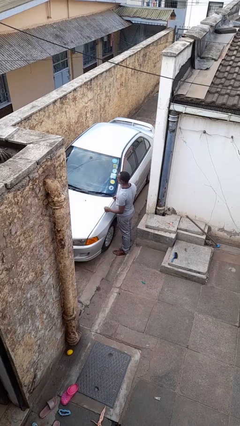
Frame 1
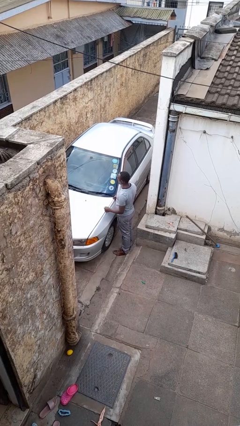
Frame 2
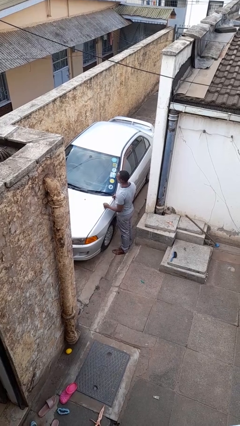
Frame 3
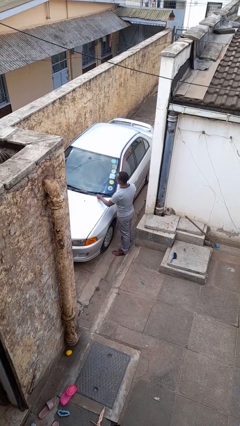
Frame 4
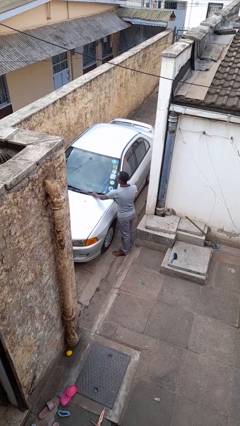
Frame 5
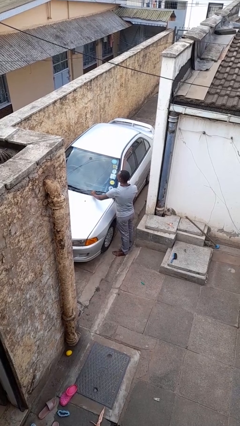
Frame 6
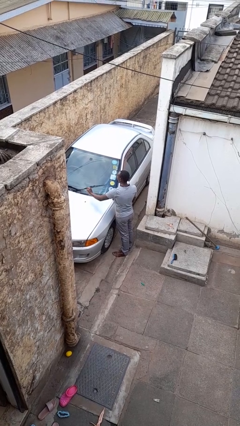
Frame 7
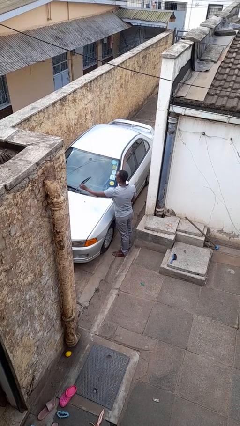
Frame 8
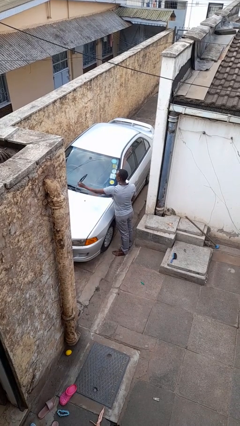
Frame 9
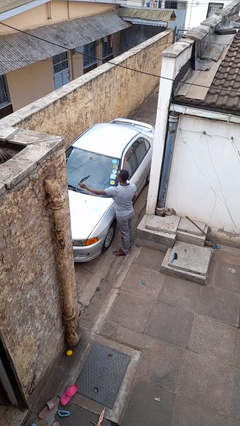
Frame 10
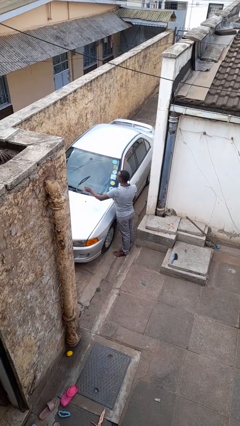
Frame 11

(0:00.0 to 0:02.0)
person flips up car wipers

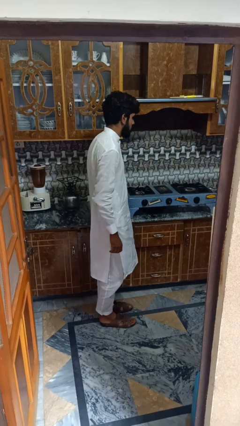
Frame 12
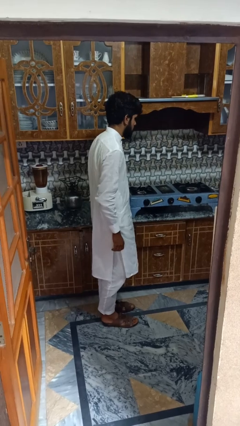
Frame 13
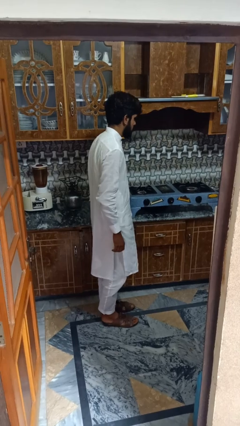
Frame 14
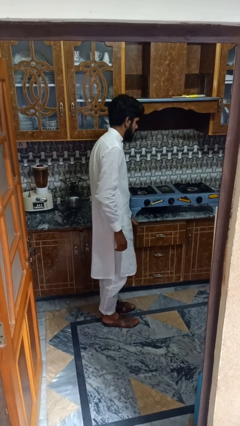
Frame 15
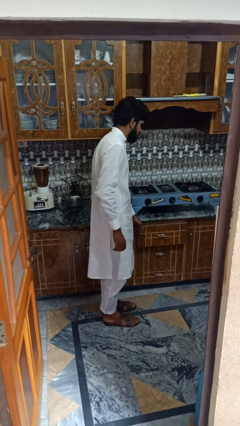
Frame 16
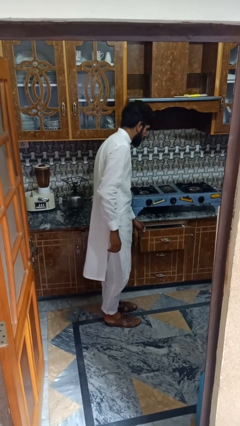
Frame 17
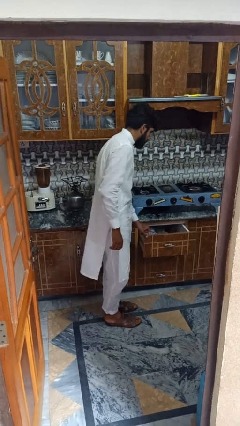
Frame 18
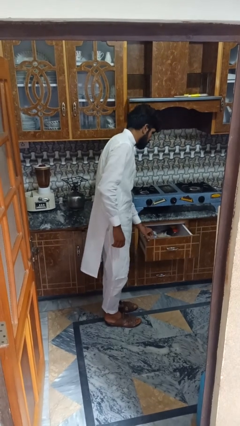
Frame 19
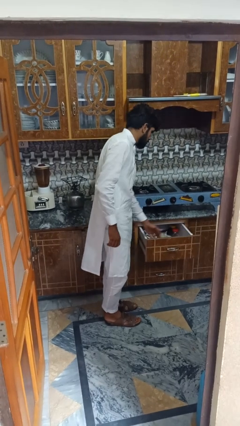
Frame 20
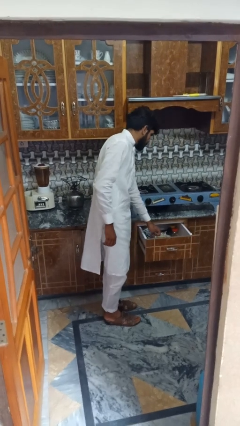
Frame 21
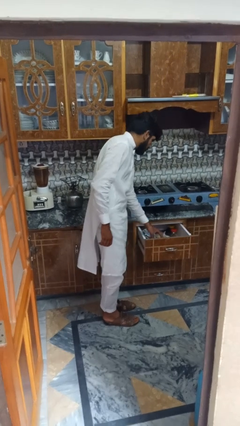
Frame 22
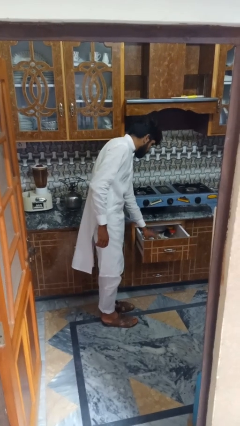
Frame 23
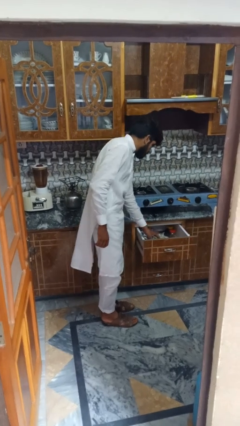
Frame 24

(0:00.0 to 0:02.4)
person searches in kitchen drawer

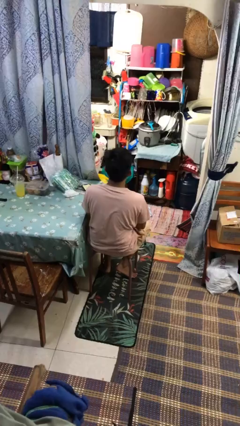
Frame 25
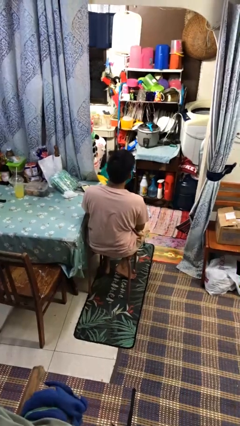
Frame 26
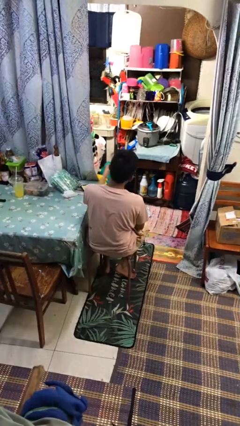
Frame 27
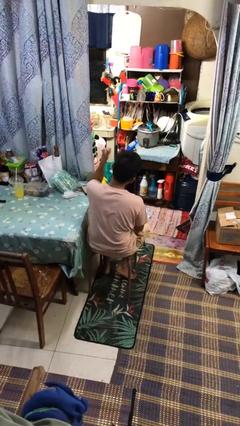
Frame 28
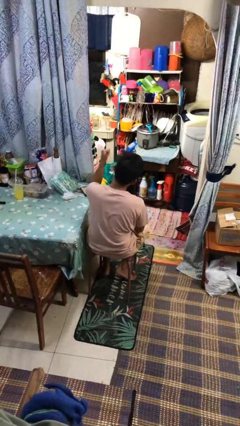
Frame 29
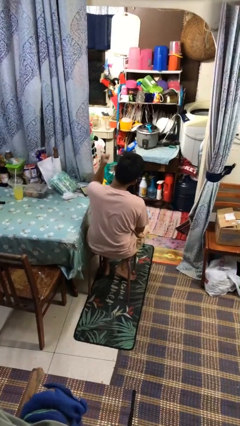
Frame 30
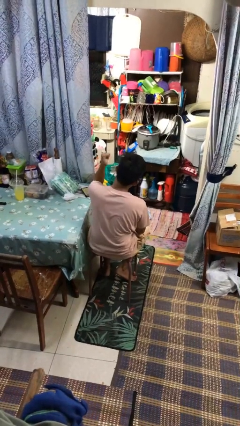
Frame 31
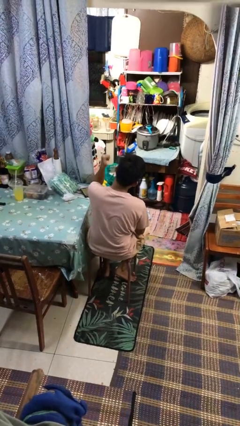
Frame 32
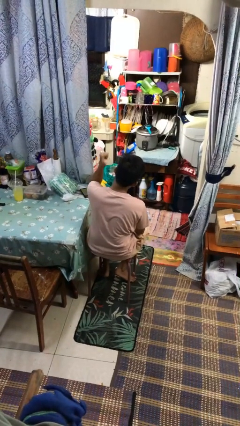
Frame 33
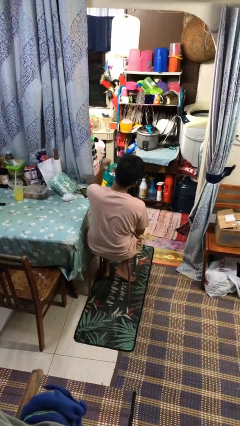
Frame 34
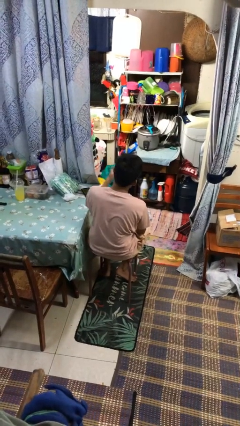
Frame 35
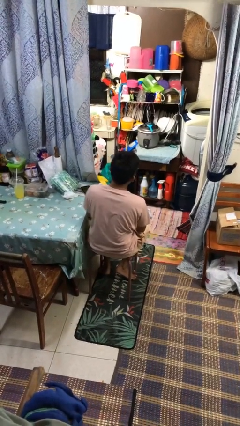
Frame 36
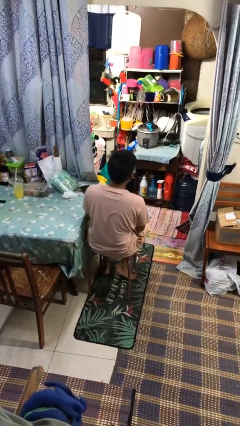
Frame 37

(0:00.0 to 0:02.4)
person gestures behind me

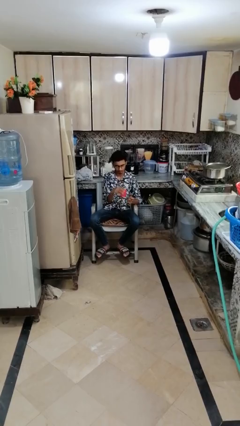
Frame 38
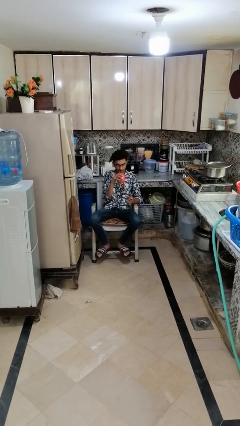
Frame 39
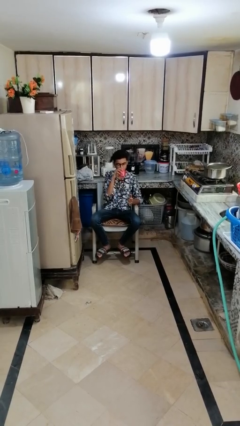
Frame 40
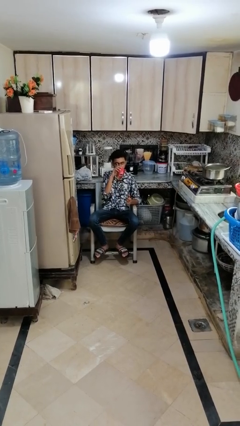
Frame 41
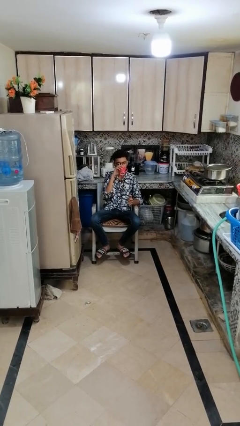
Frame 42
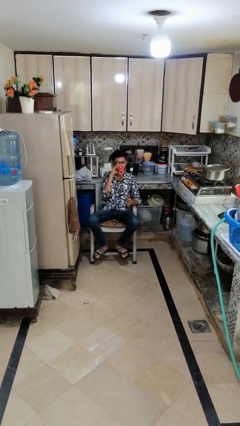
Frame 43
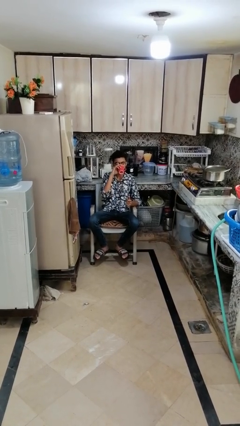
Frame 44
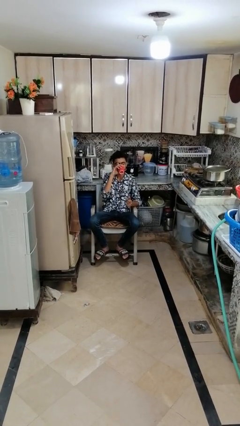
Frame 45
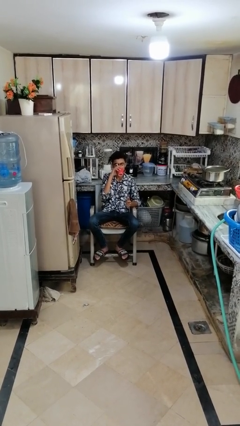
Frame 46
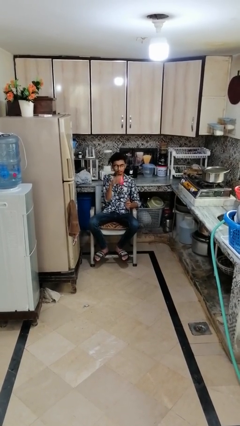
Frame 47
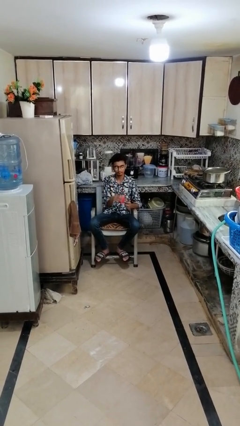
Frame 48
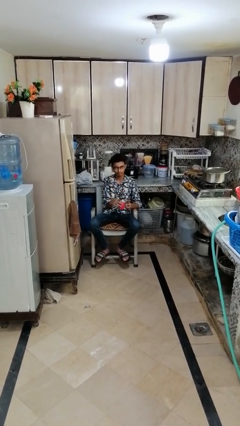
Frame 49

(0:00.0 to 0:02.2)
person drinks from mug

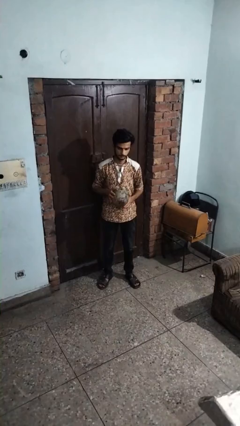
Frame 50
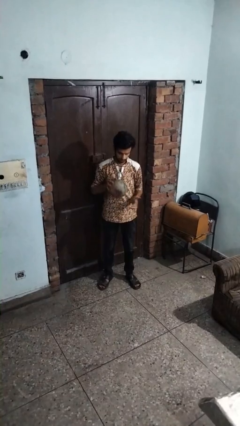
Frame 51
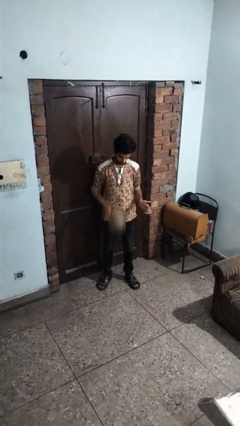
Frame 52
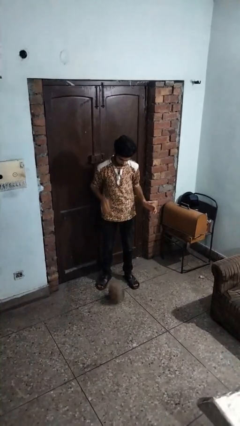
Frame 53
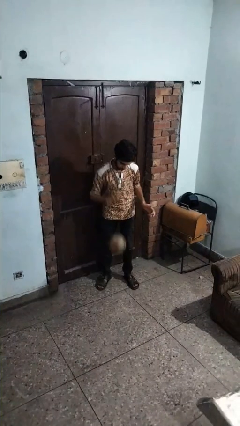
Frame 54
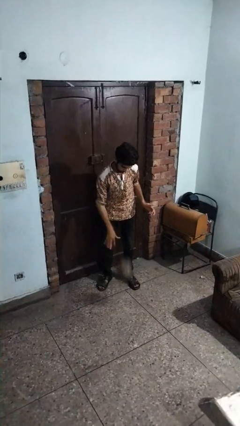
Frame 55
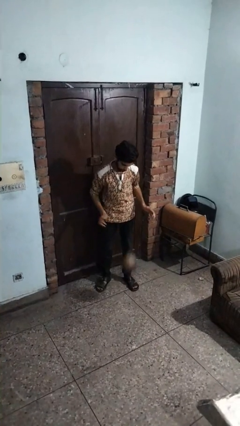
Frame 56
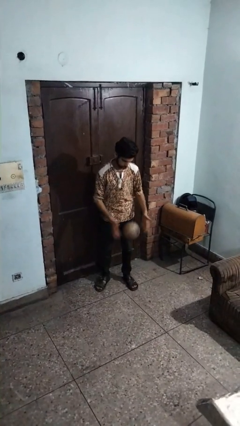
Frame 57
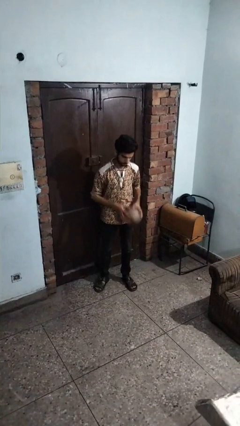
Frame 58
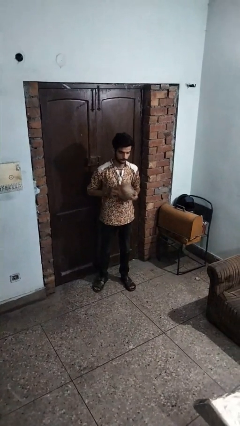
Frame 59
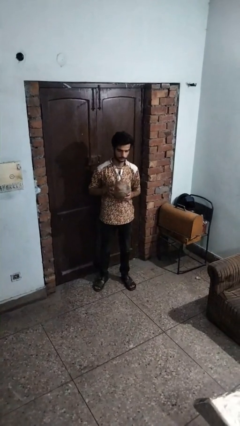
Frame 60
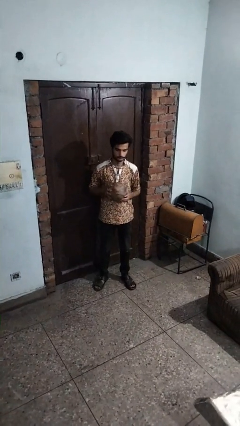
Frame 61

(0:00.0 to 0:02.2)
person bounces ball on floor

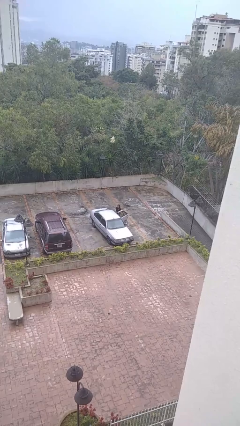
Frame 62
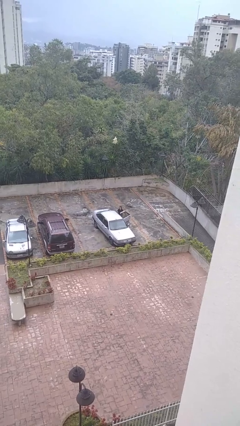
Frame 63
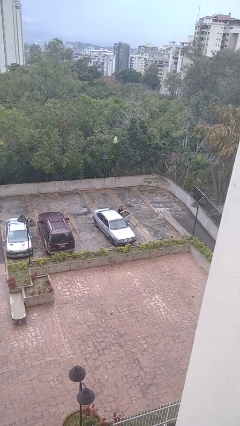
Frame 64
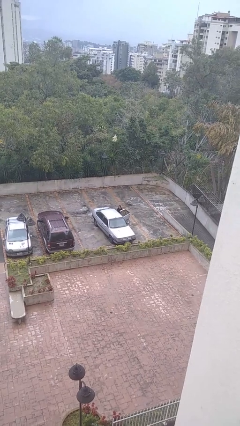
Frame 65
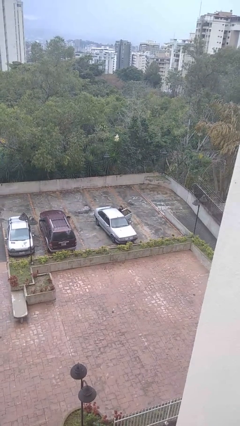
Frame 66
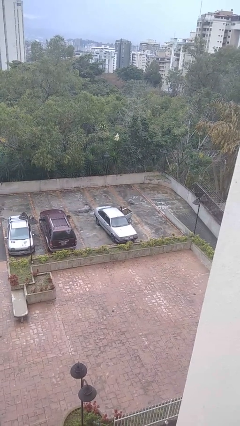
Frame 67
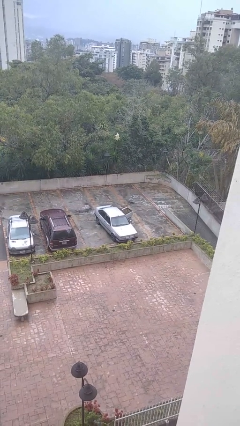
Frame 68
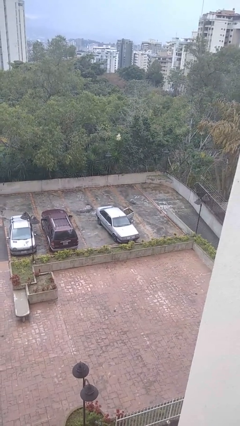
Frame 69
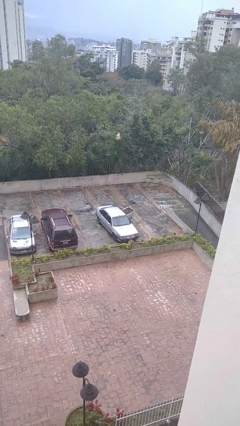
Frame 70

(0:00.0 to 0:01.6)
person enters car

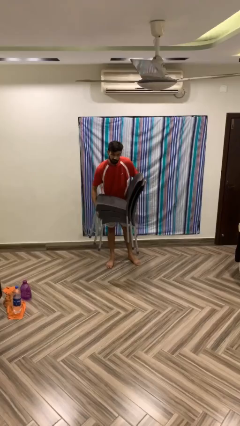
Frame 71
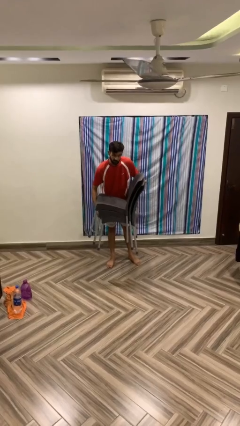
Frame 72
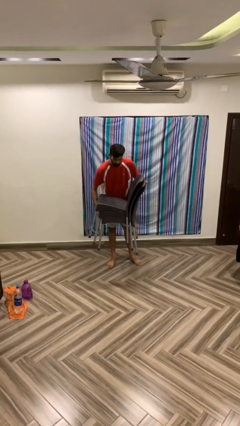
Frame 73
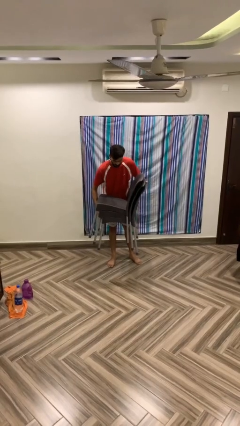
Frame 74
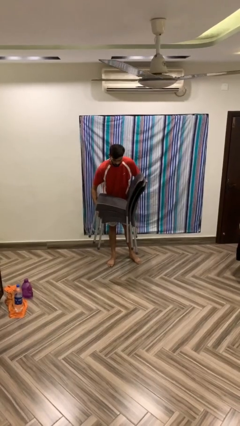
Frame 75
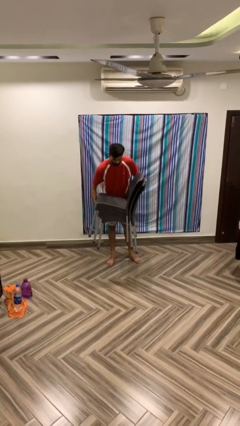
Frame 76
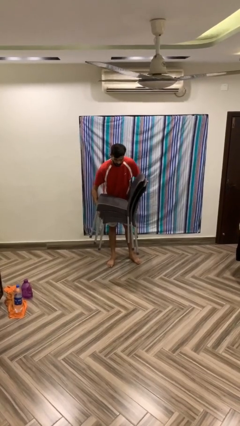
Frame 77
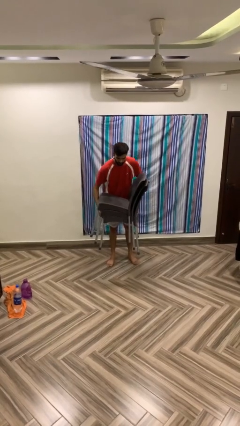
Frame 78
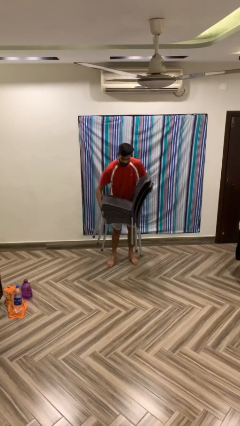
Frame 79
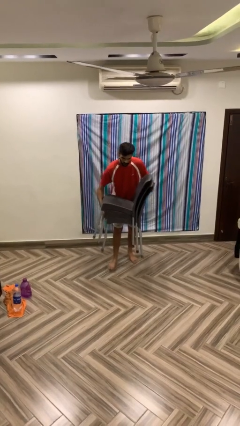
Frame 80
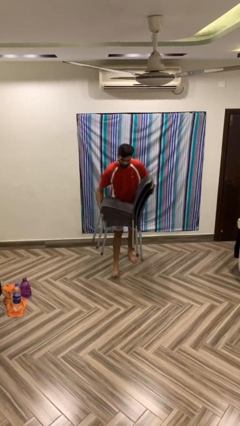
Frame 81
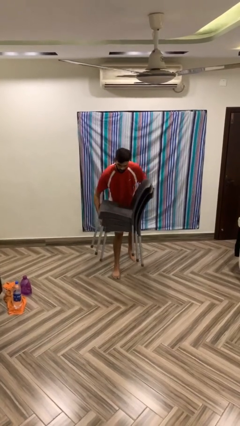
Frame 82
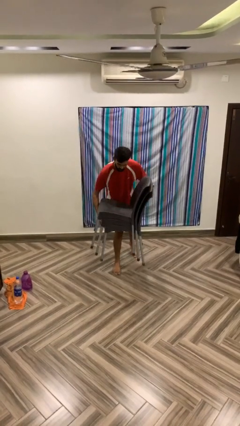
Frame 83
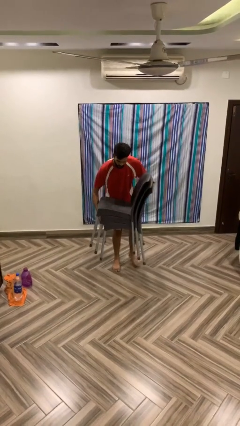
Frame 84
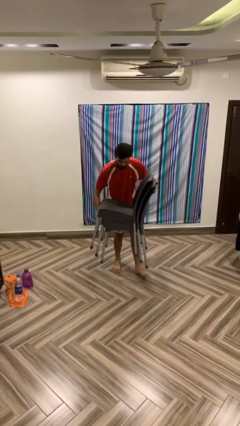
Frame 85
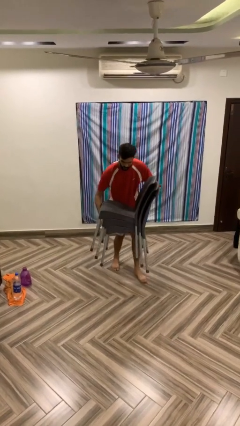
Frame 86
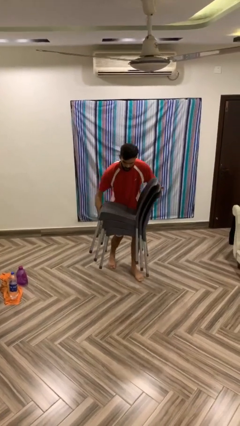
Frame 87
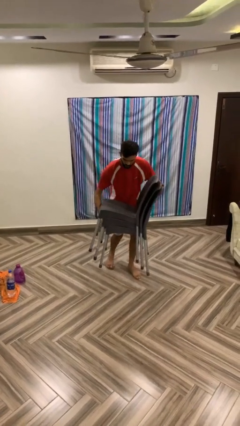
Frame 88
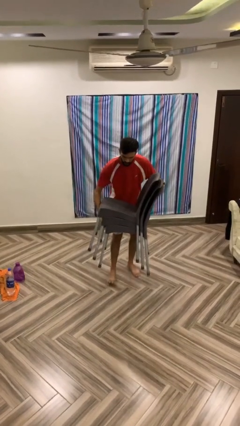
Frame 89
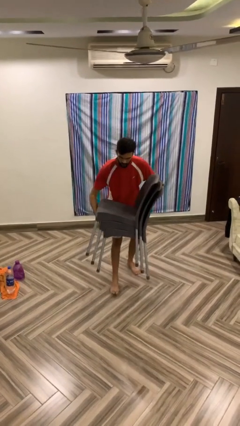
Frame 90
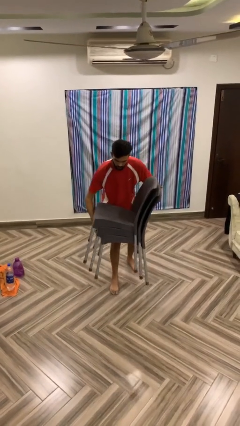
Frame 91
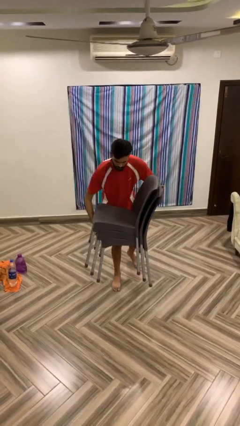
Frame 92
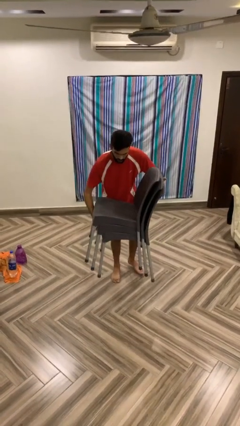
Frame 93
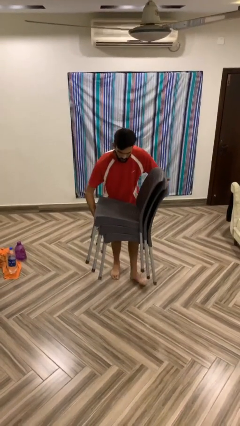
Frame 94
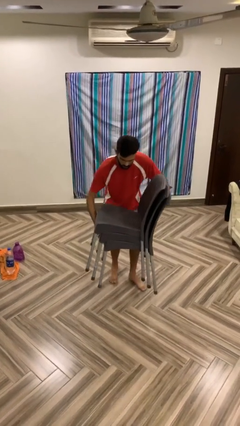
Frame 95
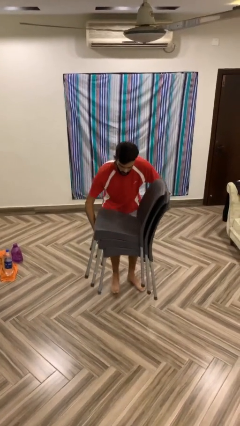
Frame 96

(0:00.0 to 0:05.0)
person carries heavy object
